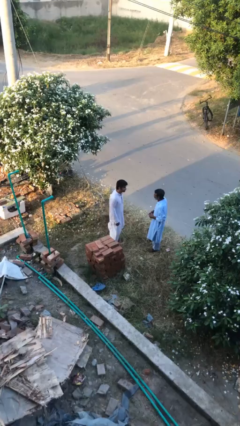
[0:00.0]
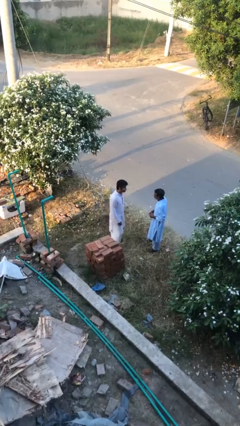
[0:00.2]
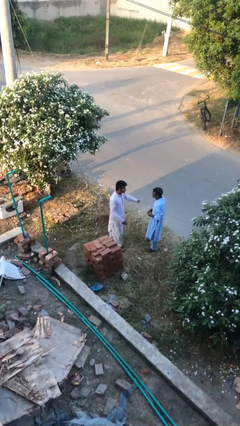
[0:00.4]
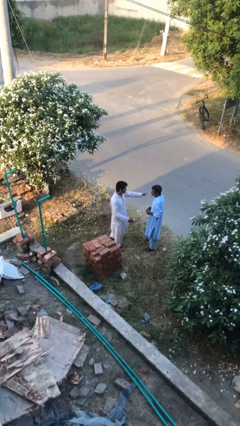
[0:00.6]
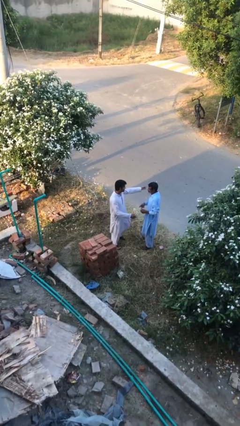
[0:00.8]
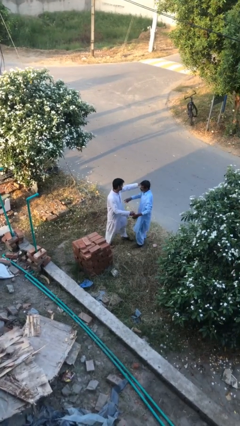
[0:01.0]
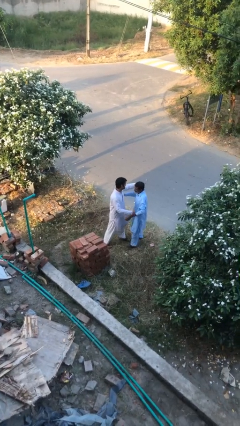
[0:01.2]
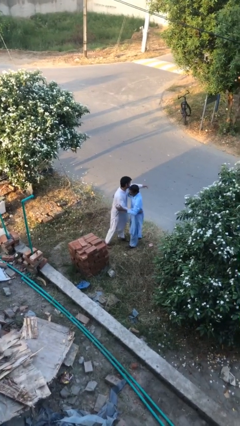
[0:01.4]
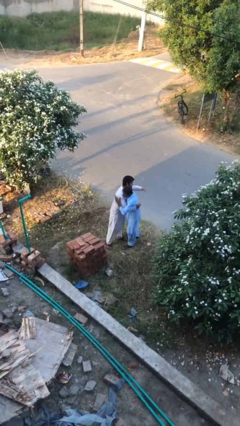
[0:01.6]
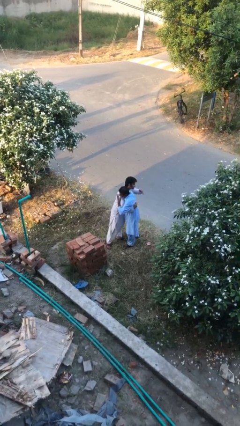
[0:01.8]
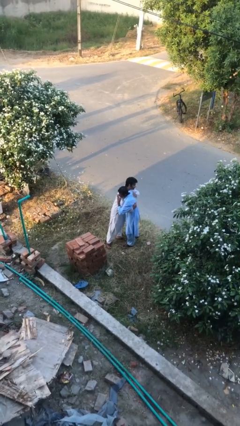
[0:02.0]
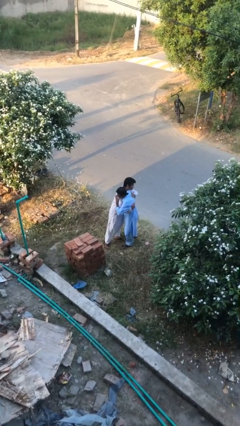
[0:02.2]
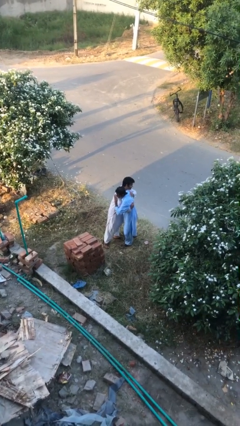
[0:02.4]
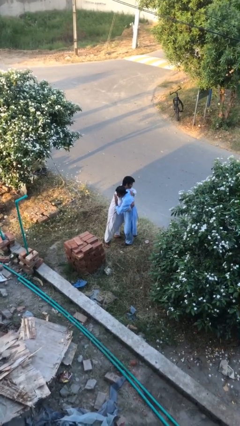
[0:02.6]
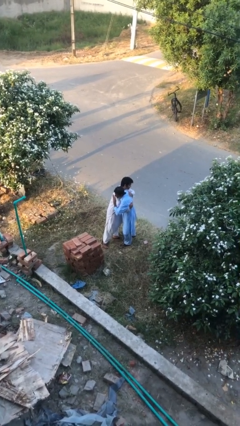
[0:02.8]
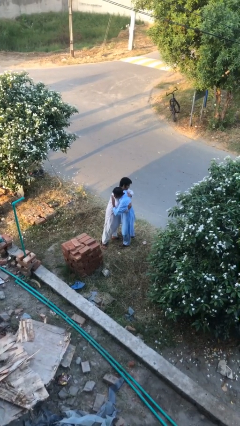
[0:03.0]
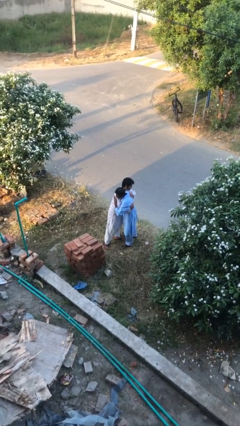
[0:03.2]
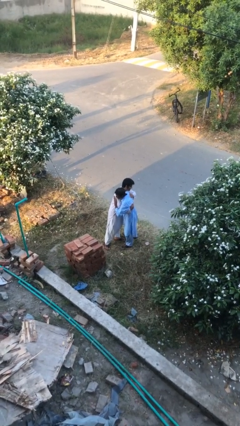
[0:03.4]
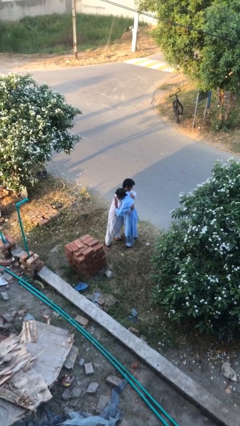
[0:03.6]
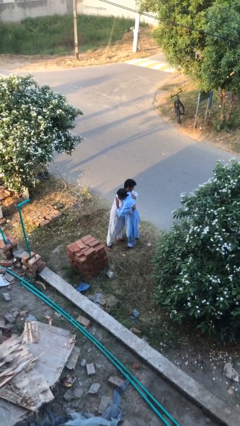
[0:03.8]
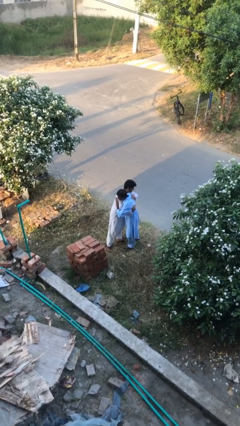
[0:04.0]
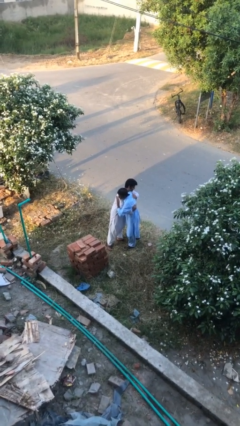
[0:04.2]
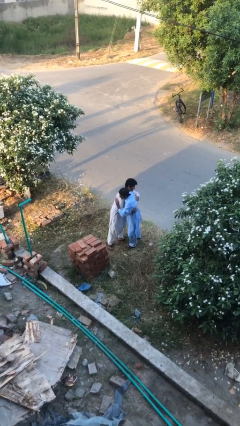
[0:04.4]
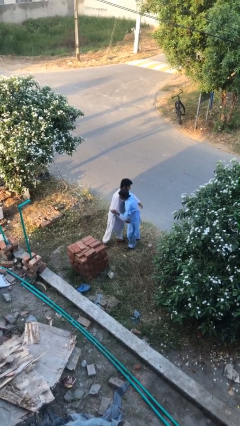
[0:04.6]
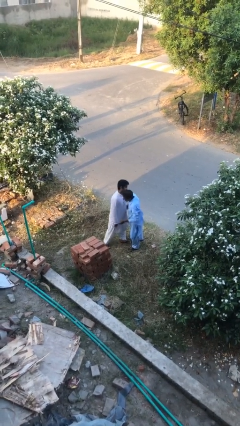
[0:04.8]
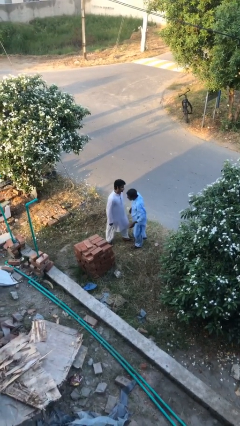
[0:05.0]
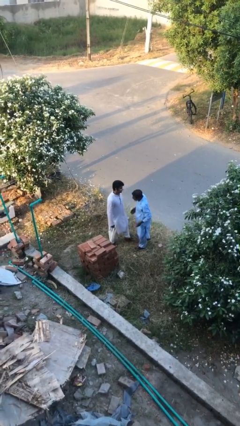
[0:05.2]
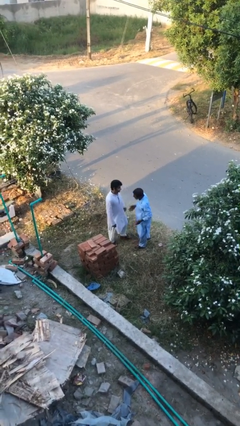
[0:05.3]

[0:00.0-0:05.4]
person embraces person

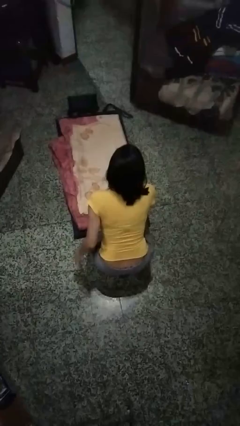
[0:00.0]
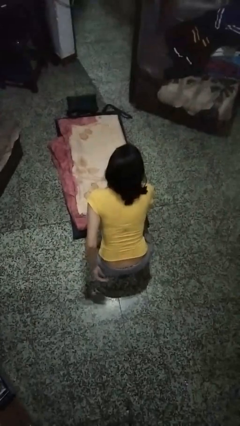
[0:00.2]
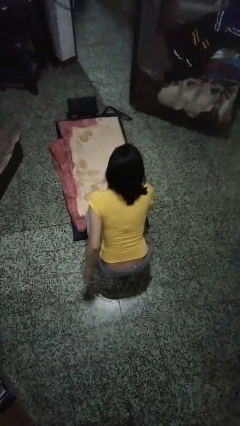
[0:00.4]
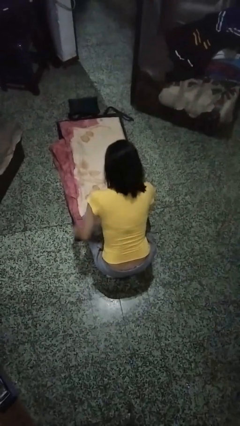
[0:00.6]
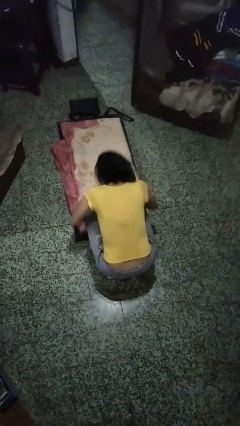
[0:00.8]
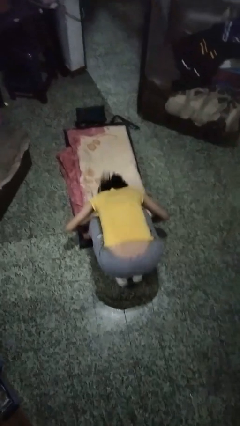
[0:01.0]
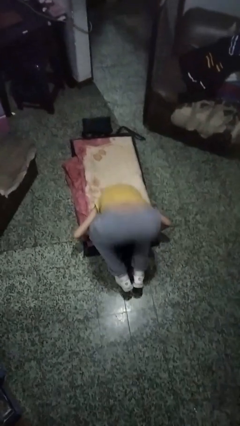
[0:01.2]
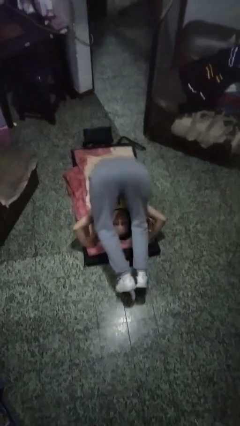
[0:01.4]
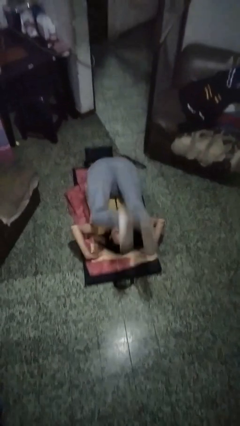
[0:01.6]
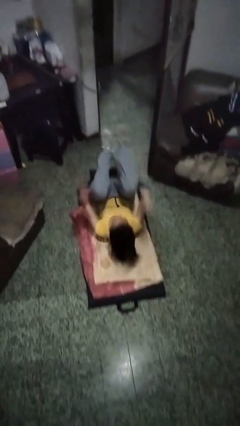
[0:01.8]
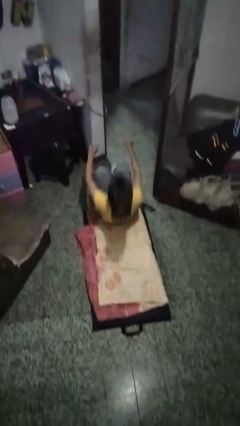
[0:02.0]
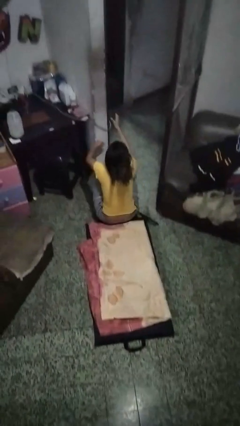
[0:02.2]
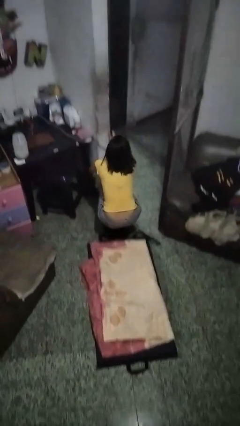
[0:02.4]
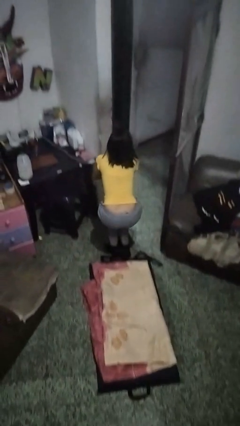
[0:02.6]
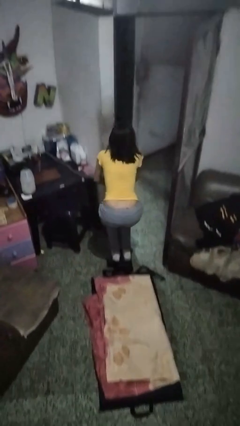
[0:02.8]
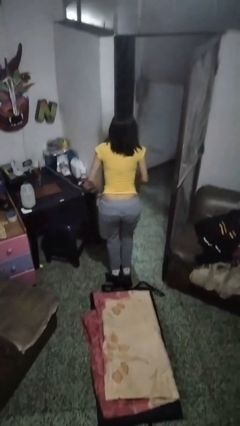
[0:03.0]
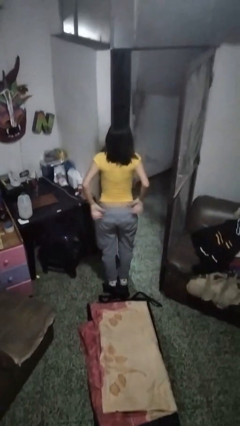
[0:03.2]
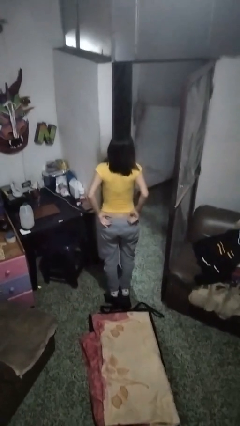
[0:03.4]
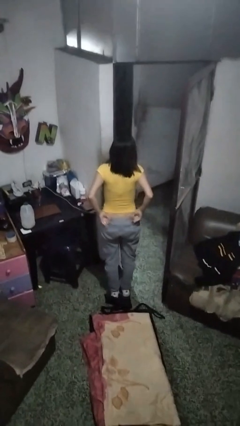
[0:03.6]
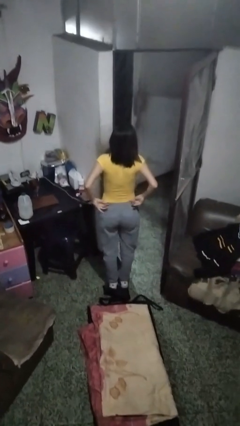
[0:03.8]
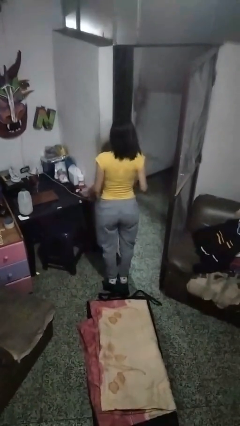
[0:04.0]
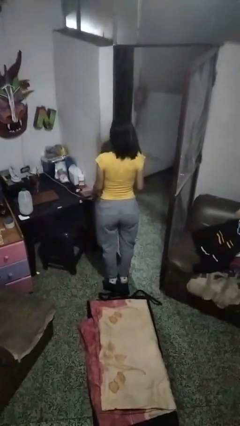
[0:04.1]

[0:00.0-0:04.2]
person somersaults

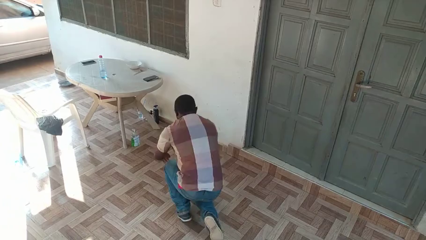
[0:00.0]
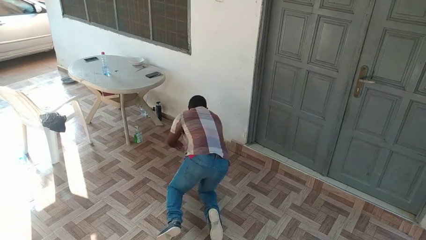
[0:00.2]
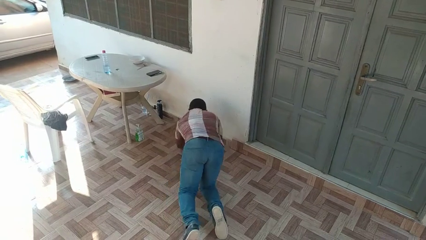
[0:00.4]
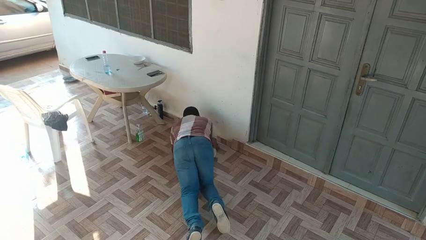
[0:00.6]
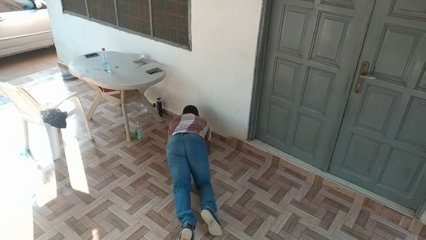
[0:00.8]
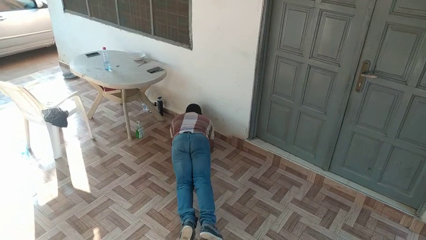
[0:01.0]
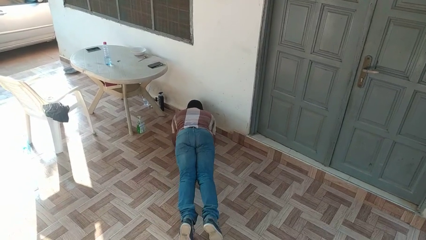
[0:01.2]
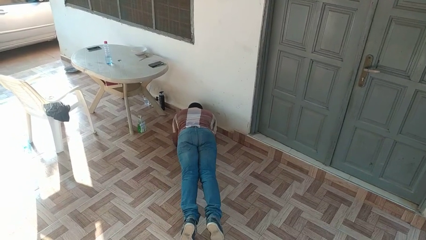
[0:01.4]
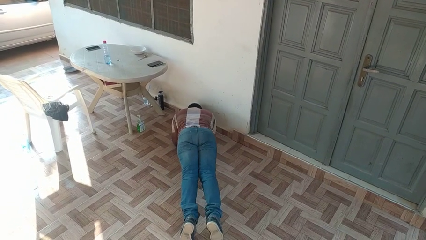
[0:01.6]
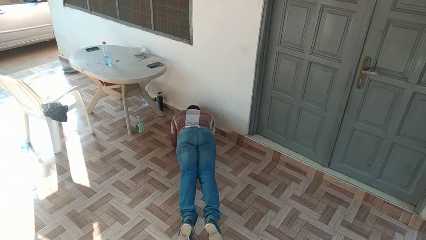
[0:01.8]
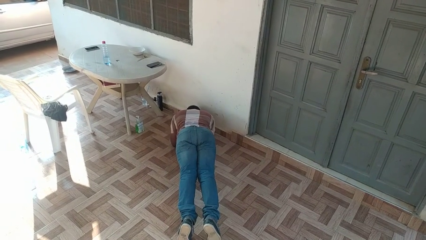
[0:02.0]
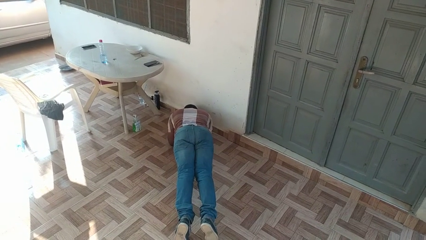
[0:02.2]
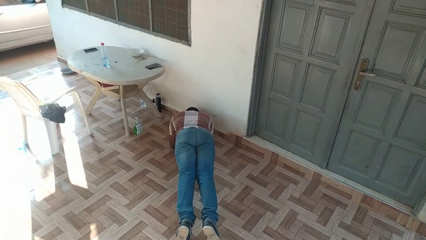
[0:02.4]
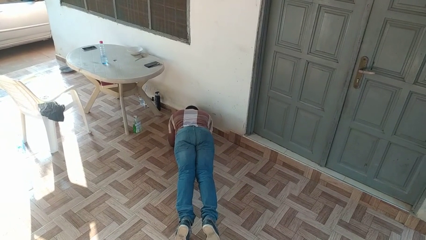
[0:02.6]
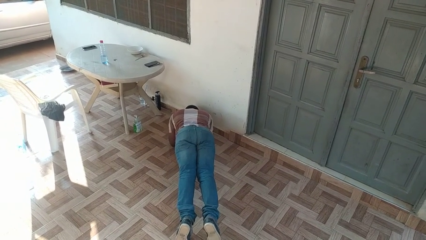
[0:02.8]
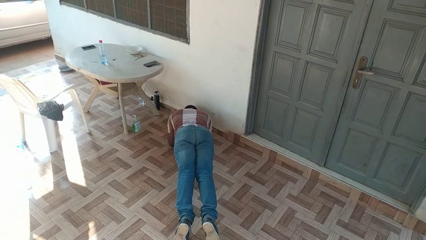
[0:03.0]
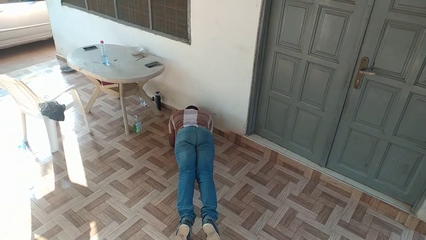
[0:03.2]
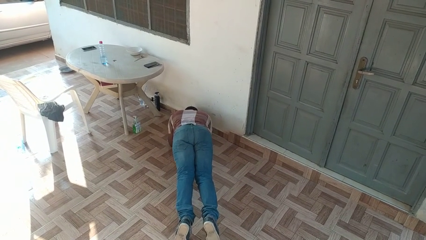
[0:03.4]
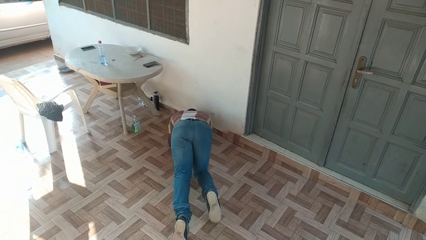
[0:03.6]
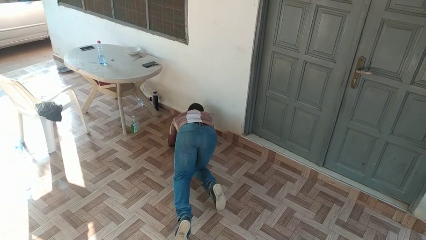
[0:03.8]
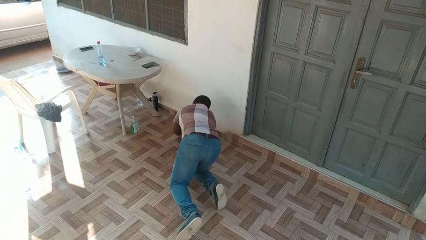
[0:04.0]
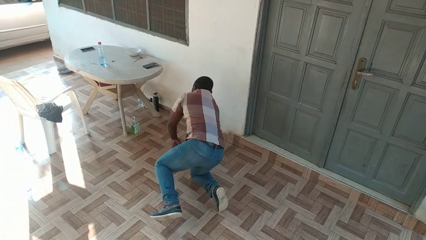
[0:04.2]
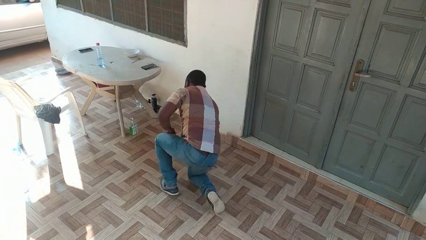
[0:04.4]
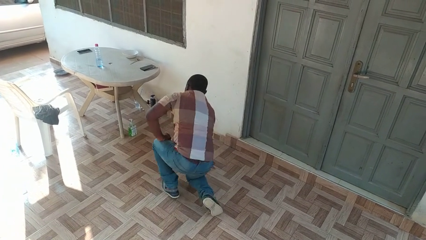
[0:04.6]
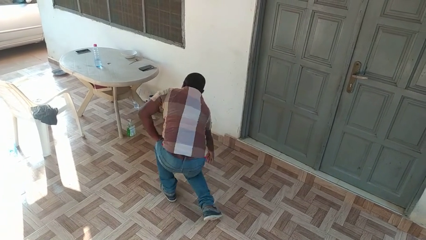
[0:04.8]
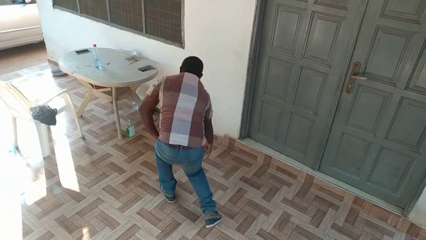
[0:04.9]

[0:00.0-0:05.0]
person exercises with plank

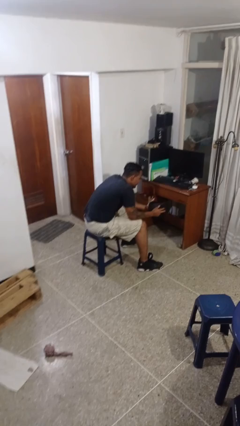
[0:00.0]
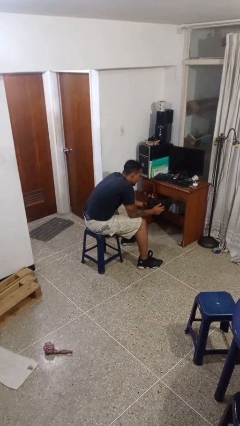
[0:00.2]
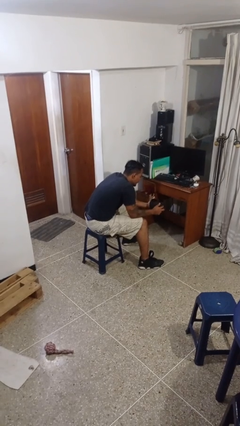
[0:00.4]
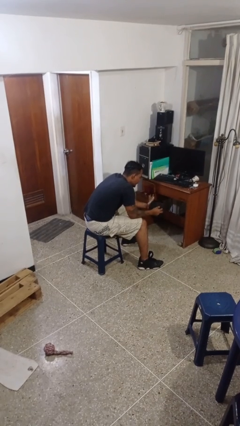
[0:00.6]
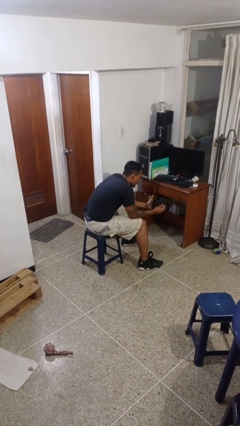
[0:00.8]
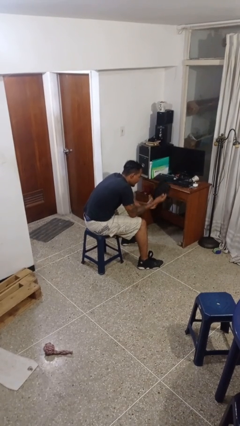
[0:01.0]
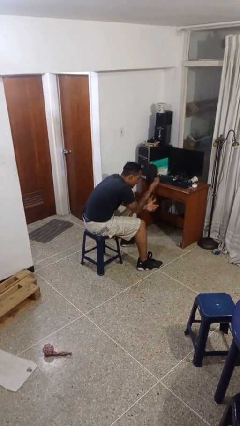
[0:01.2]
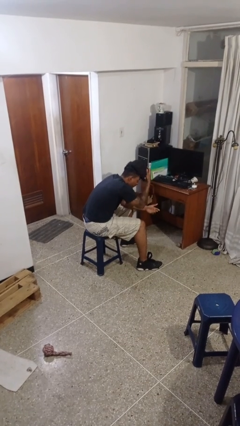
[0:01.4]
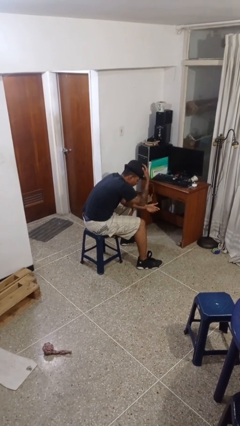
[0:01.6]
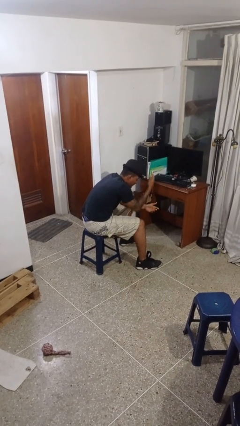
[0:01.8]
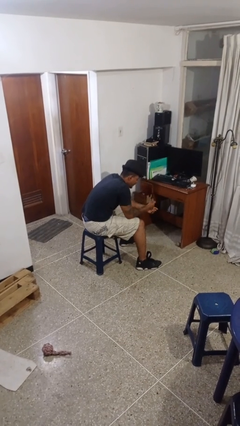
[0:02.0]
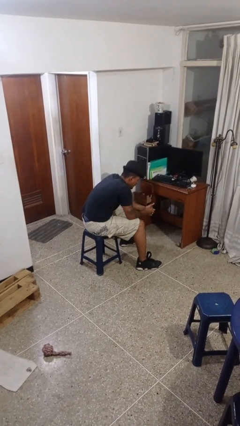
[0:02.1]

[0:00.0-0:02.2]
person puts on hat

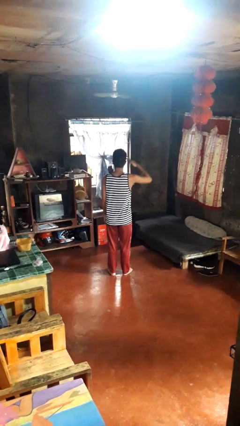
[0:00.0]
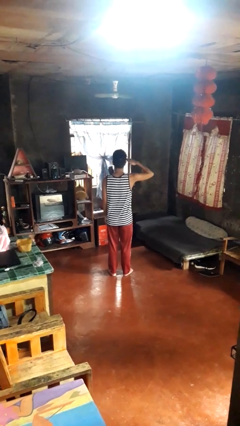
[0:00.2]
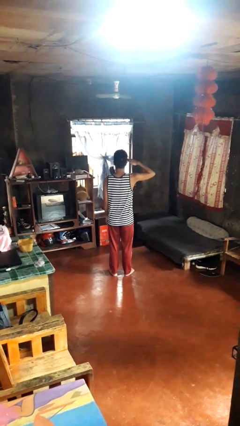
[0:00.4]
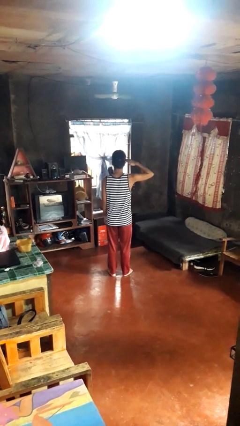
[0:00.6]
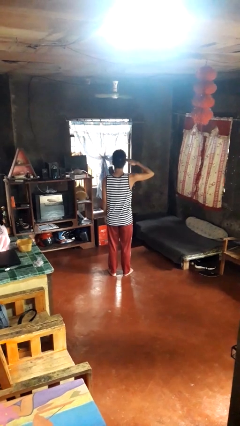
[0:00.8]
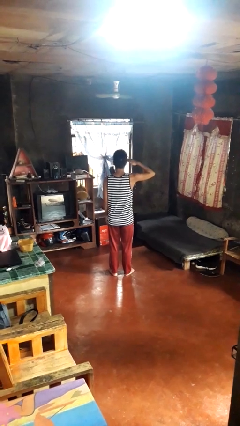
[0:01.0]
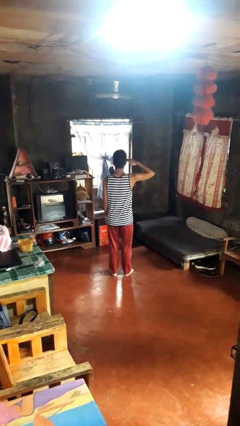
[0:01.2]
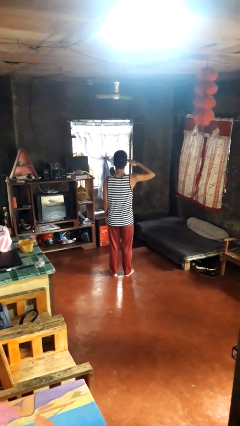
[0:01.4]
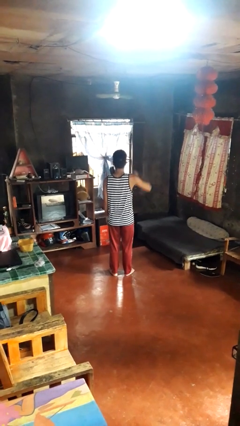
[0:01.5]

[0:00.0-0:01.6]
person salutes
